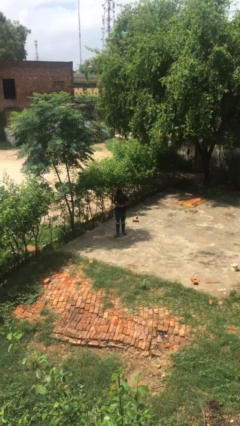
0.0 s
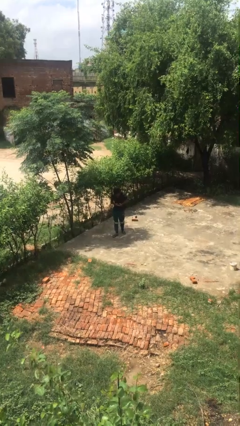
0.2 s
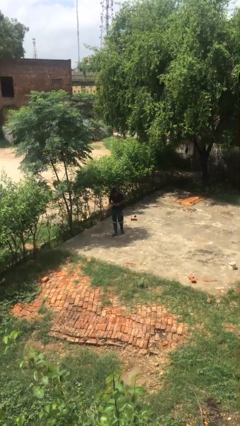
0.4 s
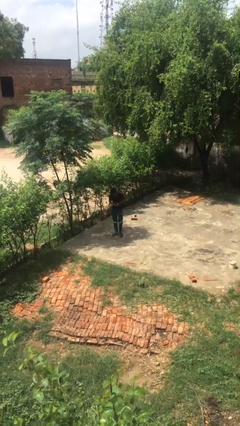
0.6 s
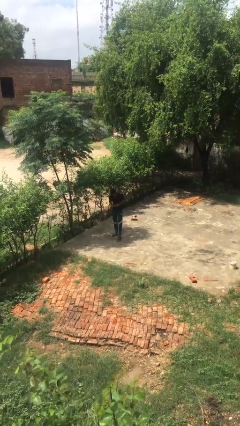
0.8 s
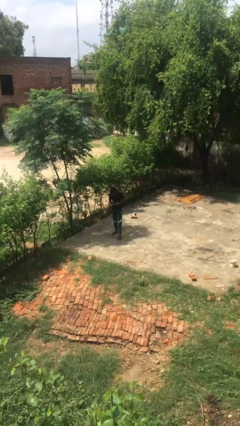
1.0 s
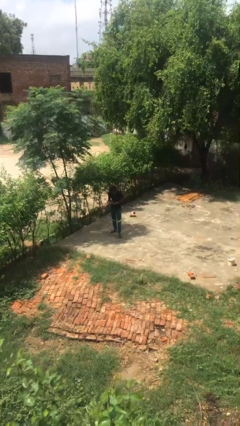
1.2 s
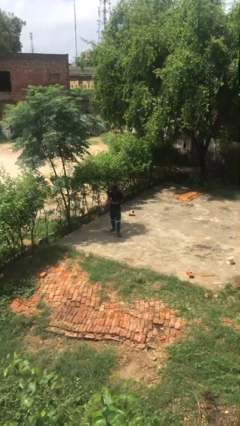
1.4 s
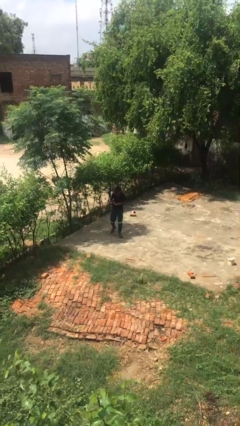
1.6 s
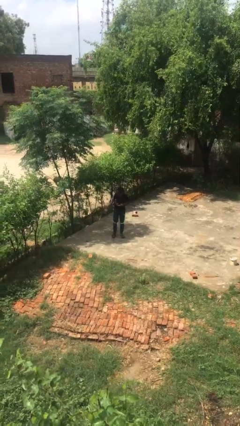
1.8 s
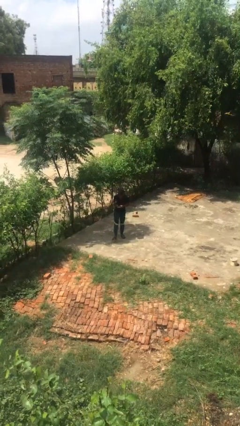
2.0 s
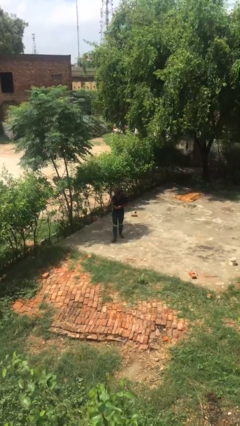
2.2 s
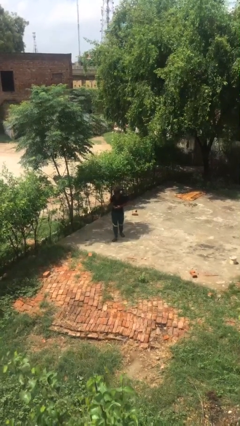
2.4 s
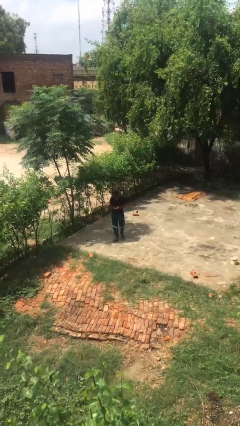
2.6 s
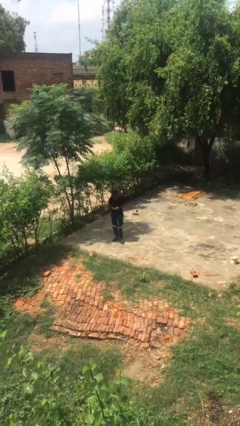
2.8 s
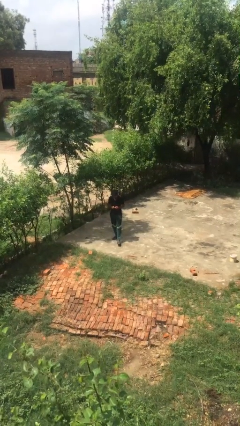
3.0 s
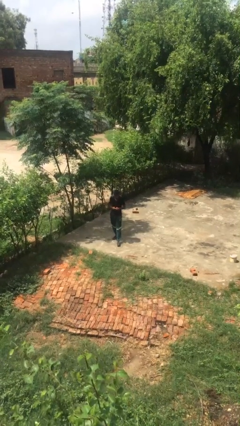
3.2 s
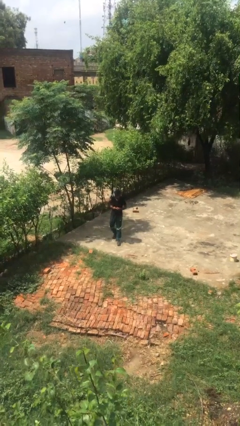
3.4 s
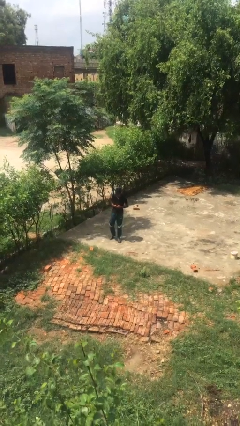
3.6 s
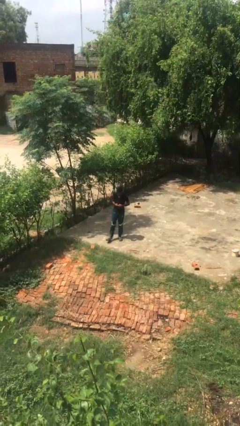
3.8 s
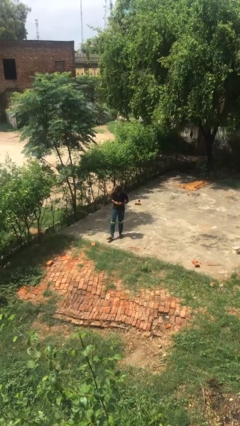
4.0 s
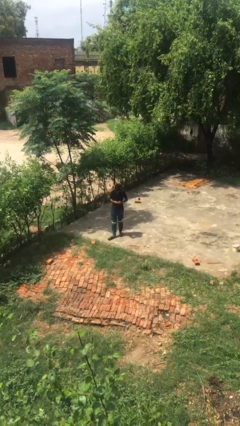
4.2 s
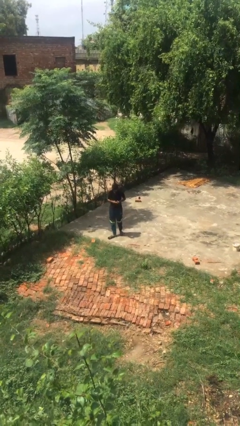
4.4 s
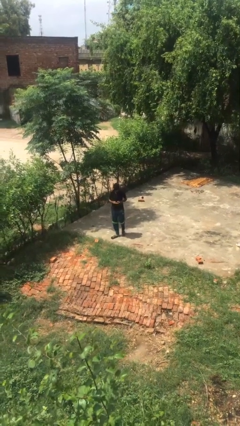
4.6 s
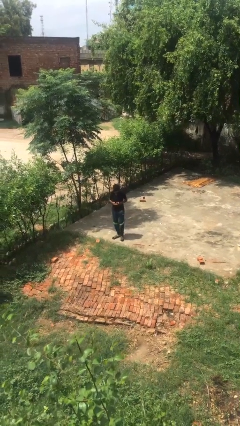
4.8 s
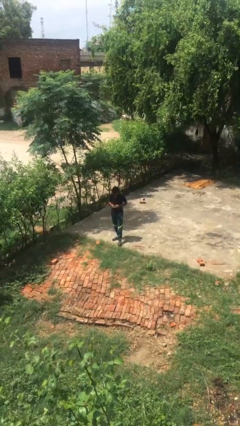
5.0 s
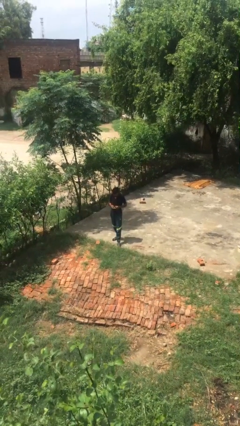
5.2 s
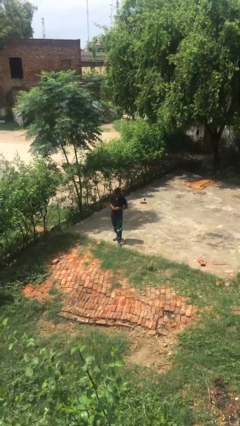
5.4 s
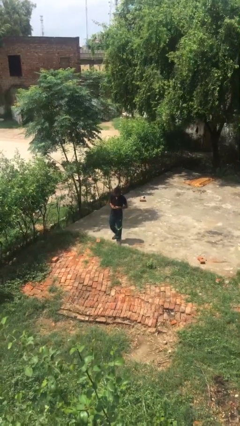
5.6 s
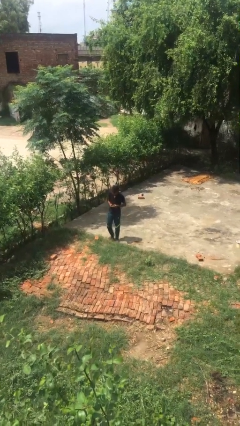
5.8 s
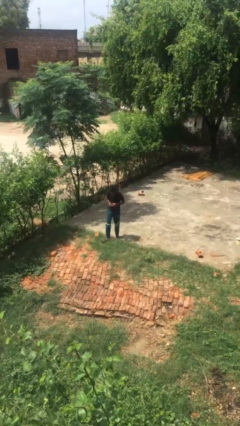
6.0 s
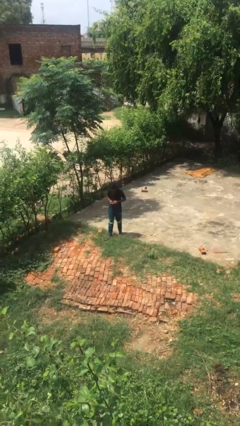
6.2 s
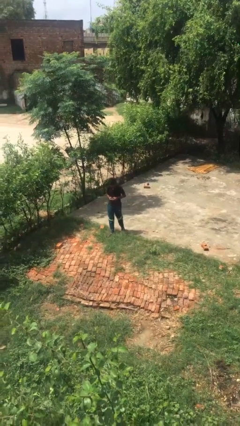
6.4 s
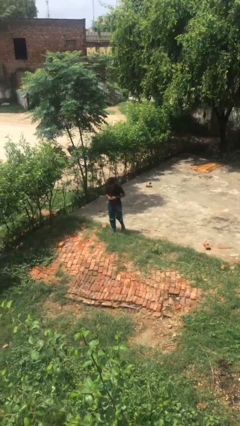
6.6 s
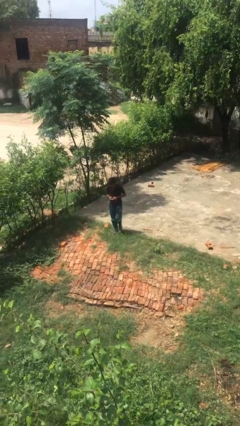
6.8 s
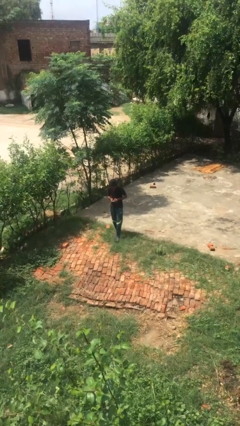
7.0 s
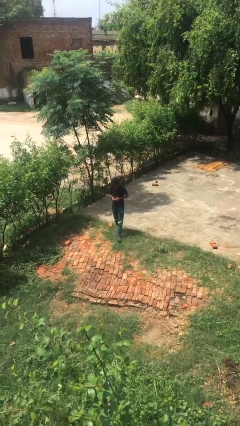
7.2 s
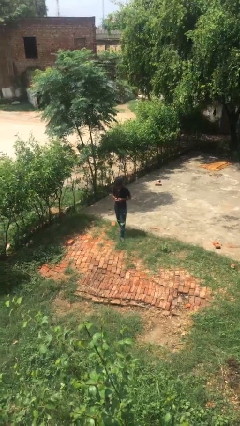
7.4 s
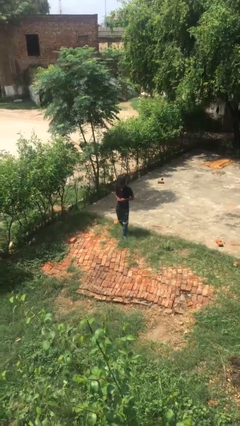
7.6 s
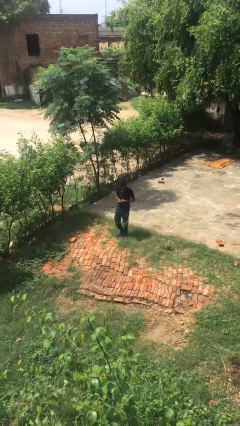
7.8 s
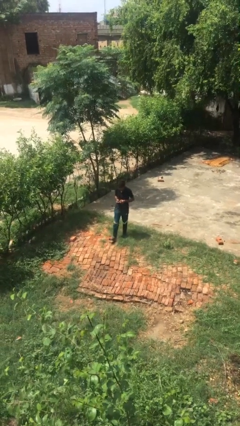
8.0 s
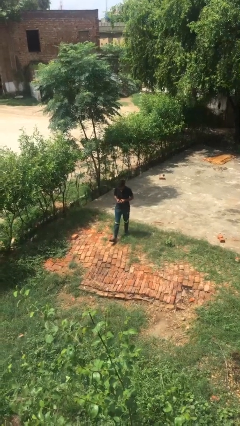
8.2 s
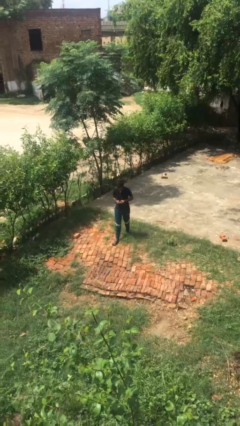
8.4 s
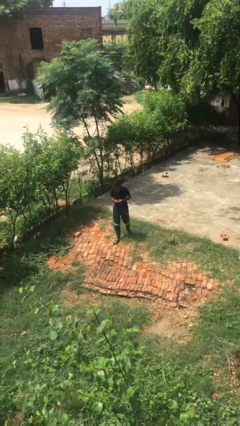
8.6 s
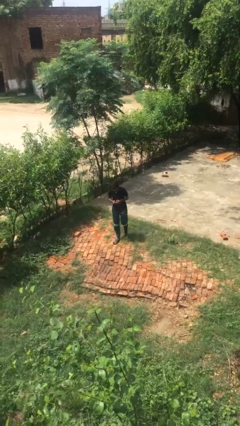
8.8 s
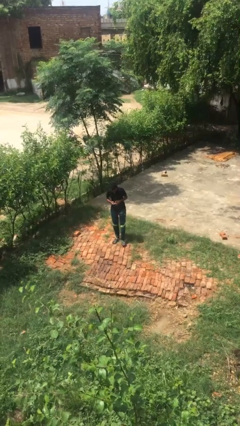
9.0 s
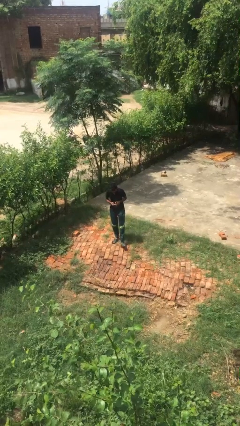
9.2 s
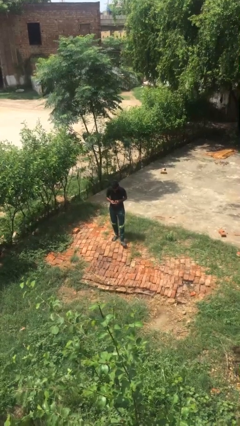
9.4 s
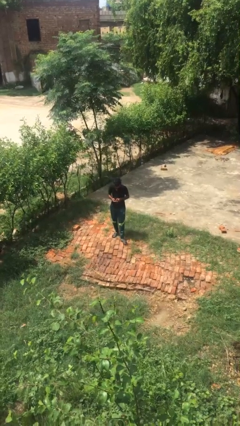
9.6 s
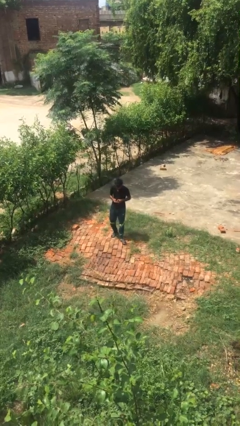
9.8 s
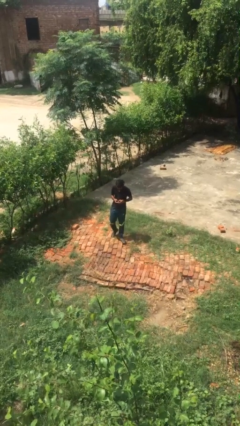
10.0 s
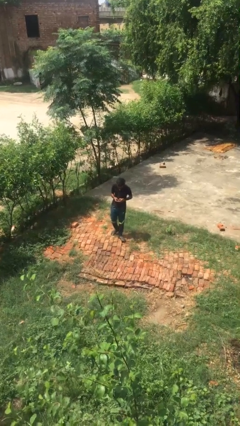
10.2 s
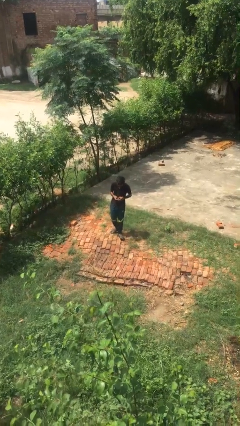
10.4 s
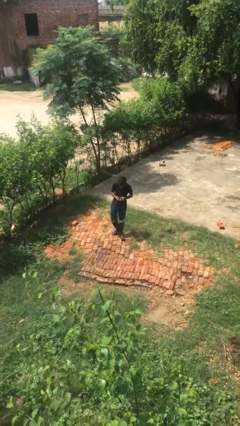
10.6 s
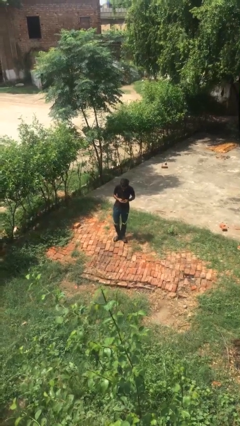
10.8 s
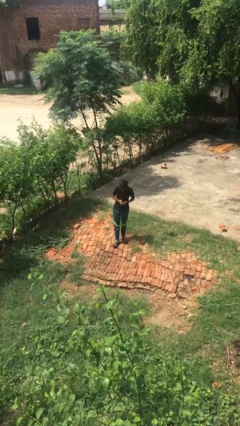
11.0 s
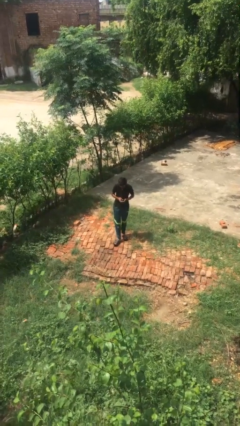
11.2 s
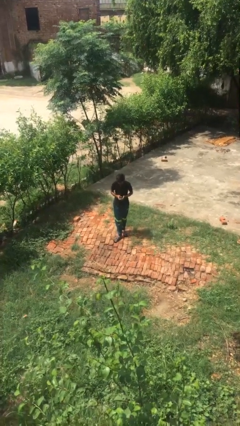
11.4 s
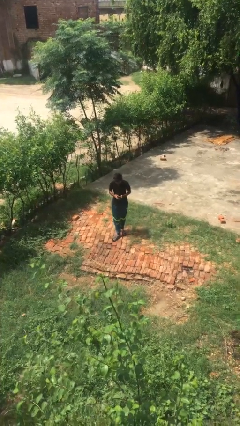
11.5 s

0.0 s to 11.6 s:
person texts on phone

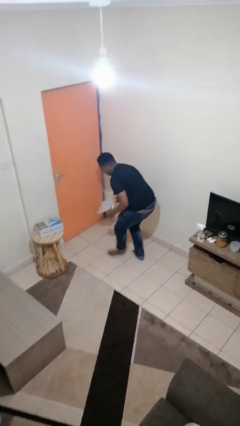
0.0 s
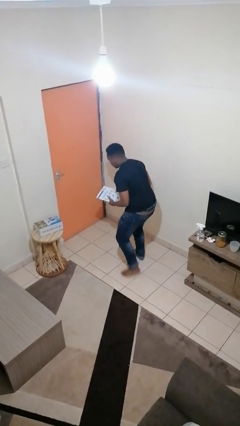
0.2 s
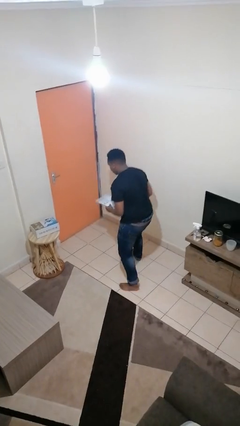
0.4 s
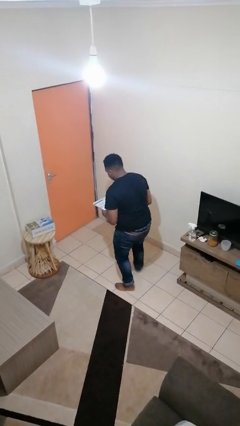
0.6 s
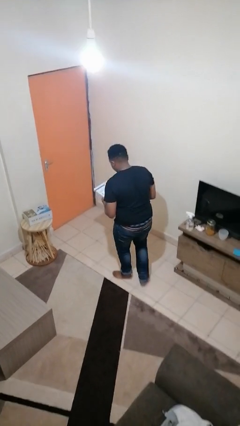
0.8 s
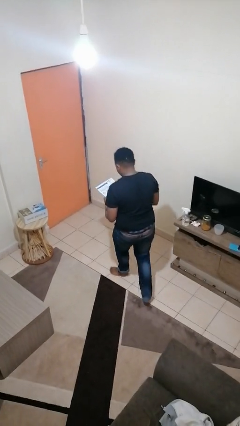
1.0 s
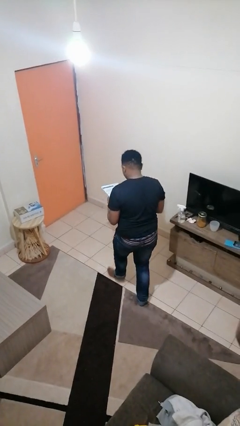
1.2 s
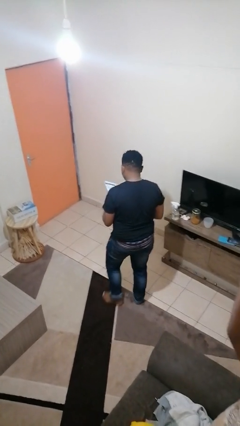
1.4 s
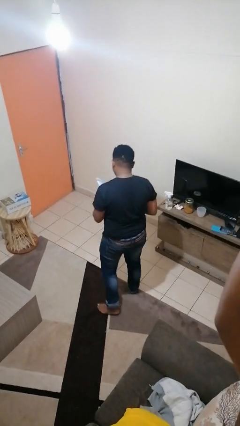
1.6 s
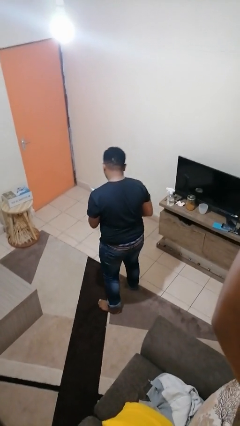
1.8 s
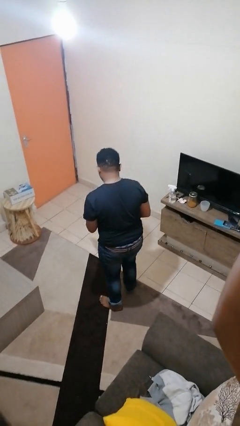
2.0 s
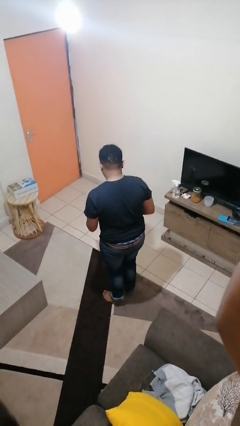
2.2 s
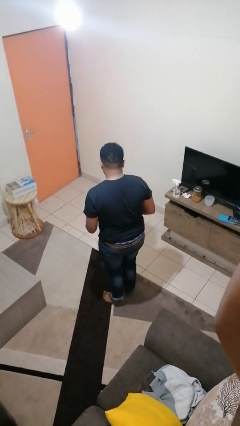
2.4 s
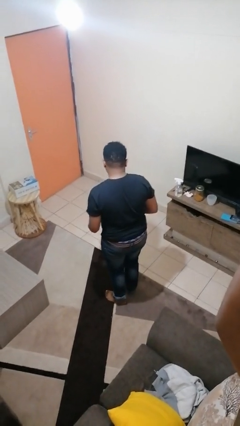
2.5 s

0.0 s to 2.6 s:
person picks up object from floor

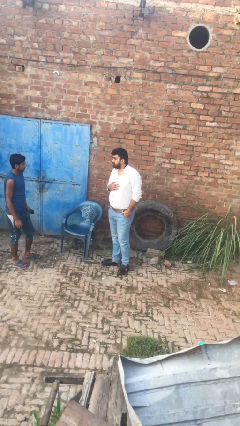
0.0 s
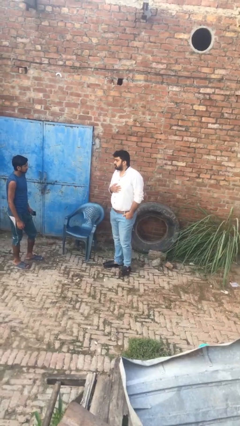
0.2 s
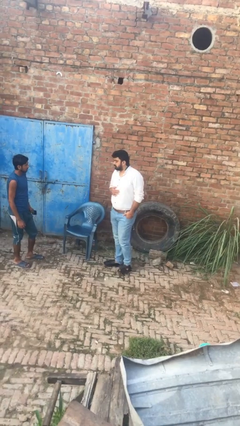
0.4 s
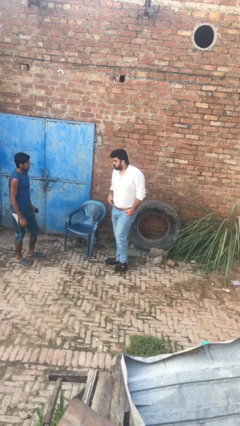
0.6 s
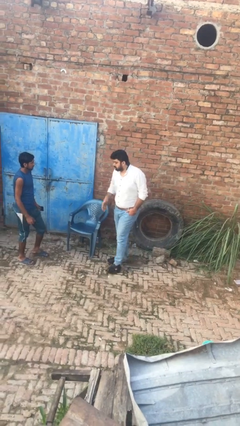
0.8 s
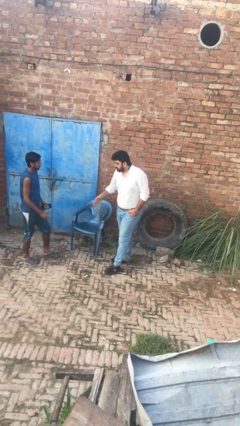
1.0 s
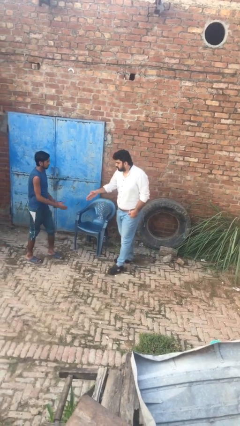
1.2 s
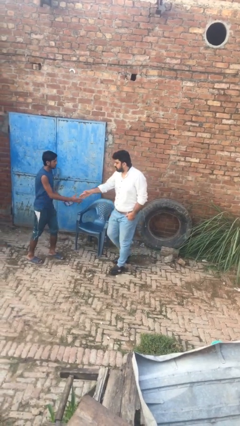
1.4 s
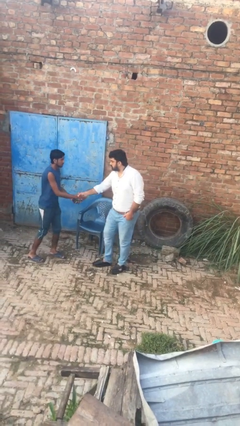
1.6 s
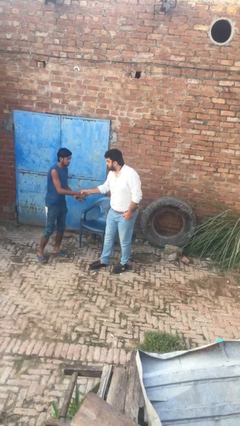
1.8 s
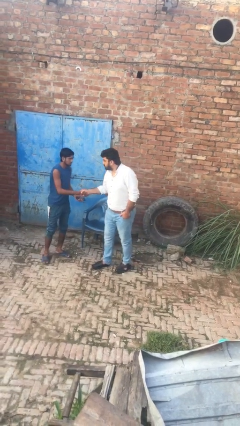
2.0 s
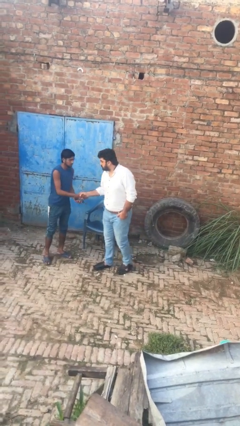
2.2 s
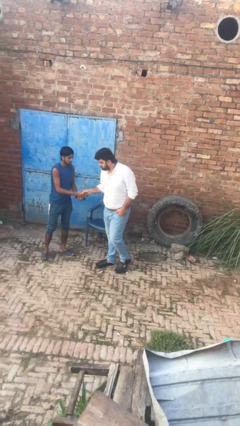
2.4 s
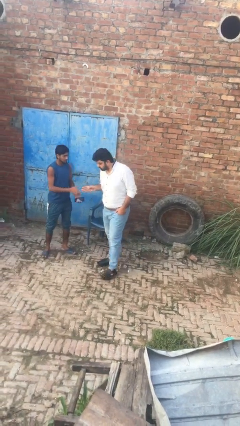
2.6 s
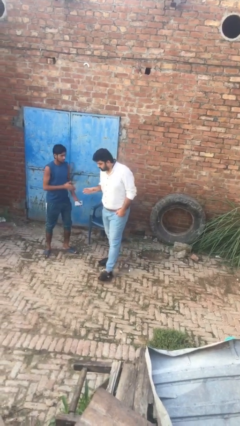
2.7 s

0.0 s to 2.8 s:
person shakes hand

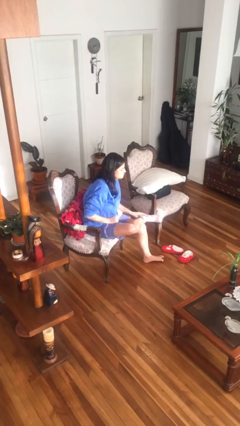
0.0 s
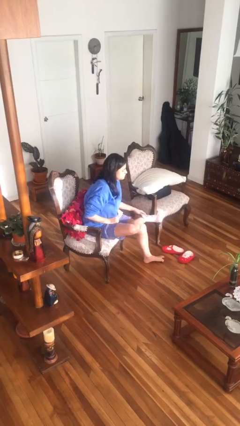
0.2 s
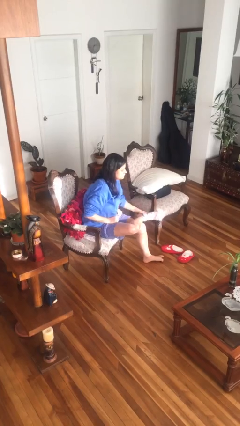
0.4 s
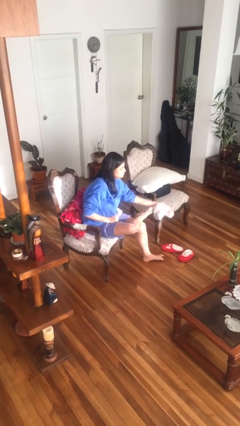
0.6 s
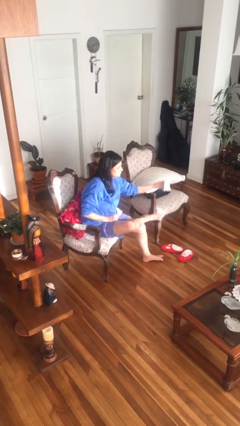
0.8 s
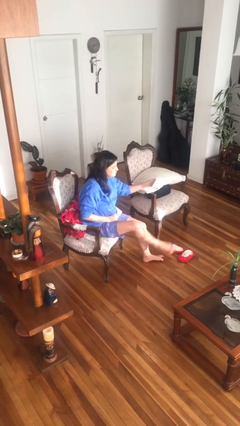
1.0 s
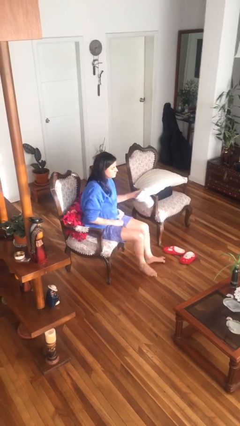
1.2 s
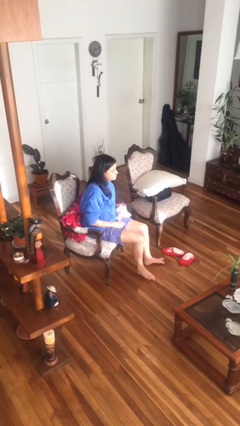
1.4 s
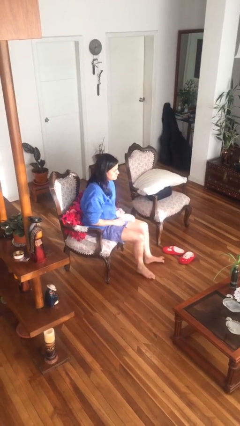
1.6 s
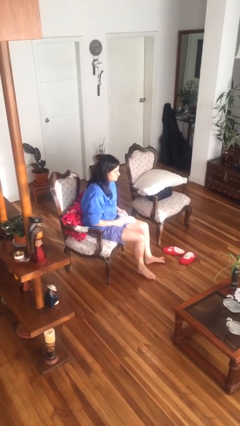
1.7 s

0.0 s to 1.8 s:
person takes off socks
